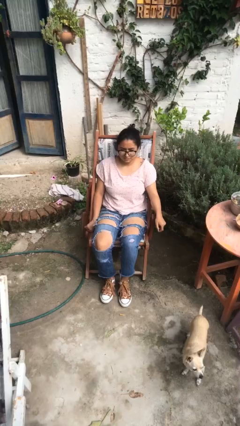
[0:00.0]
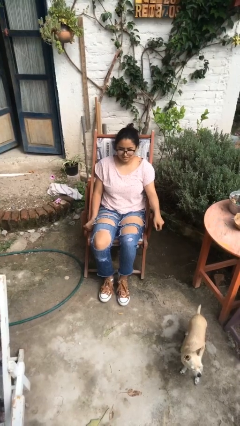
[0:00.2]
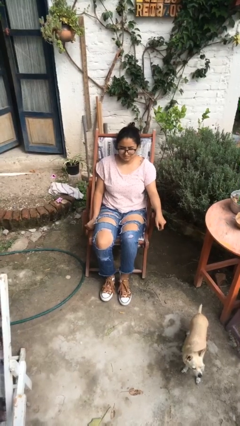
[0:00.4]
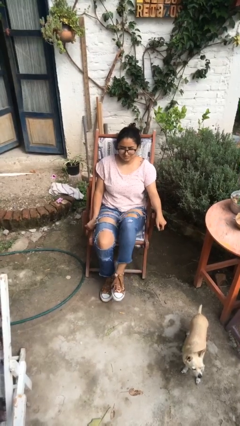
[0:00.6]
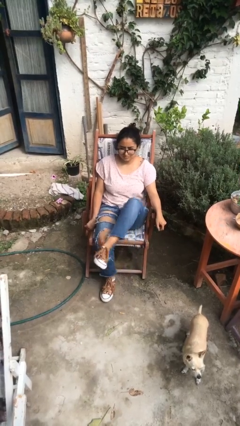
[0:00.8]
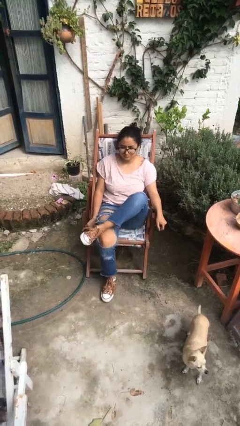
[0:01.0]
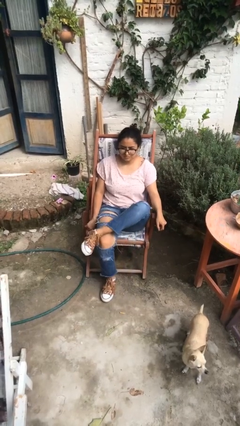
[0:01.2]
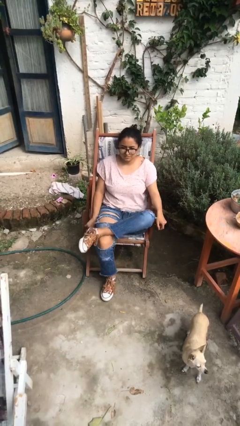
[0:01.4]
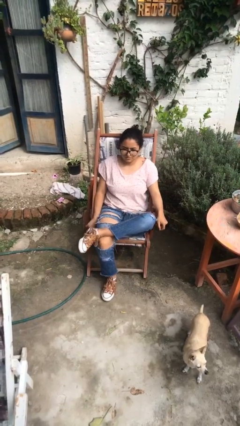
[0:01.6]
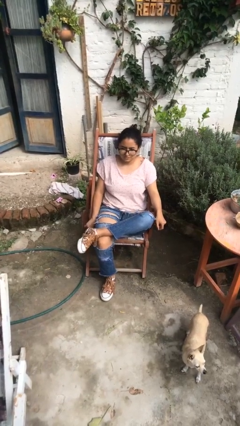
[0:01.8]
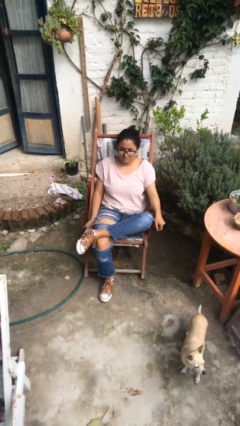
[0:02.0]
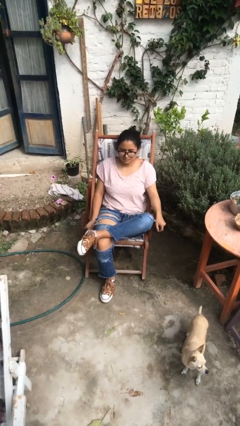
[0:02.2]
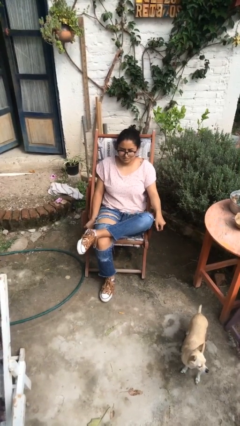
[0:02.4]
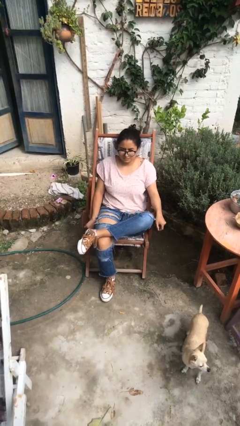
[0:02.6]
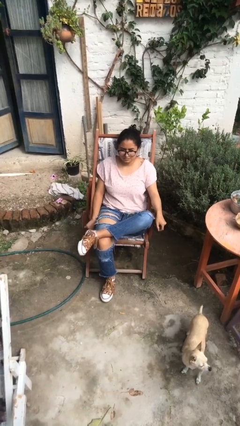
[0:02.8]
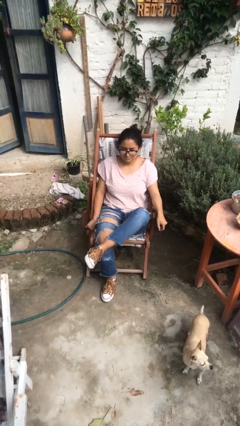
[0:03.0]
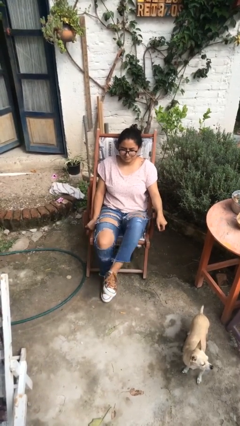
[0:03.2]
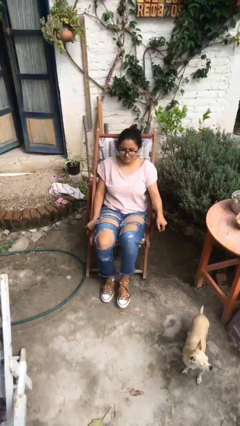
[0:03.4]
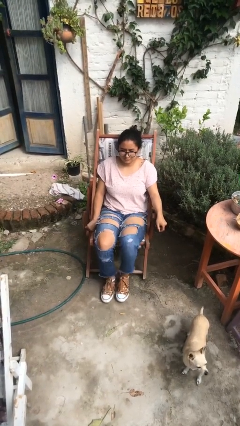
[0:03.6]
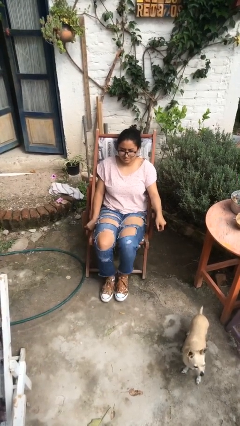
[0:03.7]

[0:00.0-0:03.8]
person crosses legs

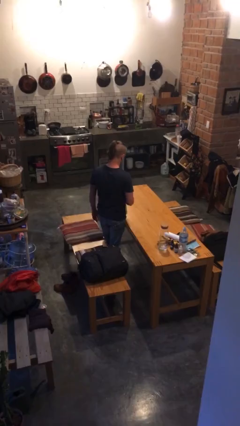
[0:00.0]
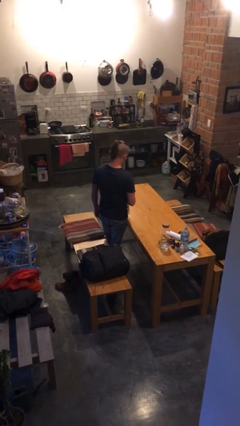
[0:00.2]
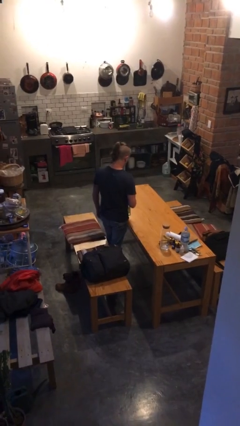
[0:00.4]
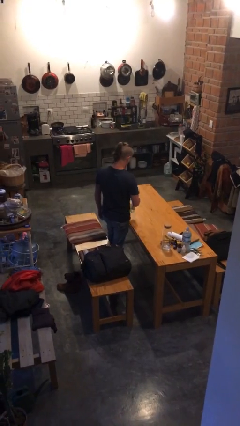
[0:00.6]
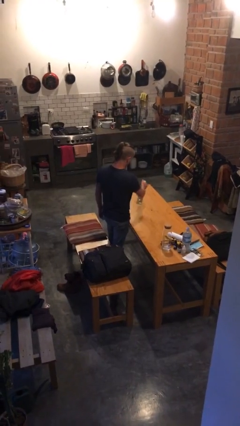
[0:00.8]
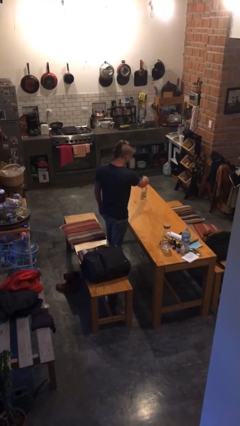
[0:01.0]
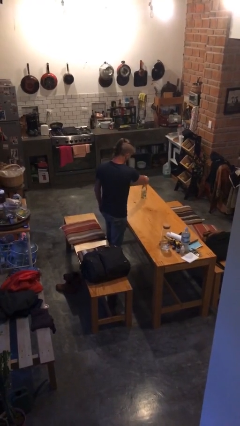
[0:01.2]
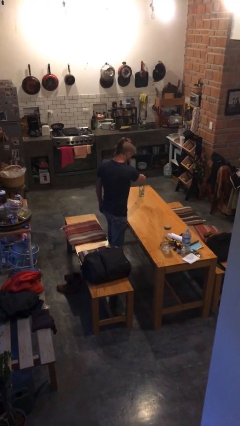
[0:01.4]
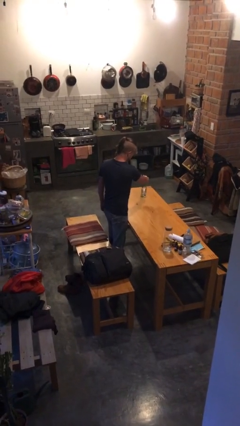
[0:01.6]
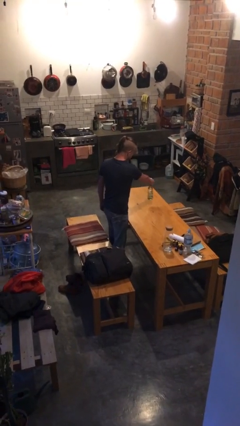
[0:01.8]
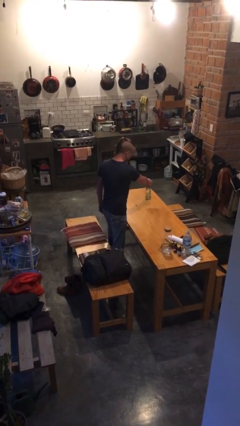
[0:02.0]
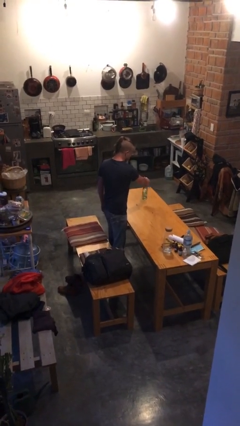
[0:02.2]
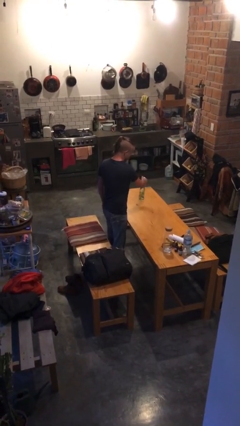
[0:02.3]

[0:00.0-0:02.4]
person sprays from bottle

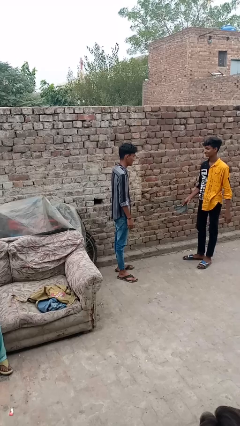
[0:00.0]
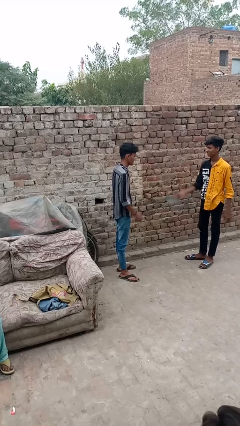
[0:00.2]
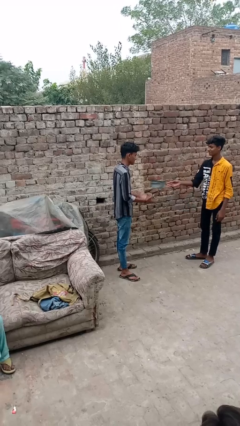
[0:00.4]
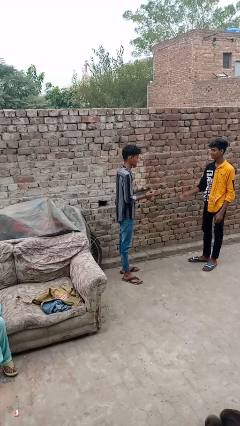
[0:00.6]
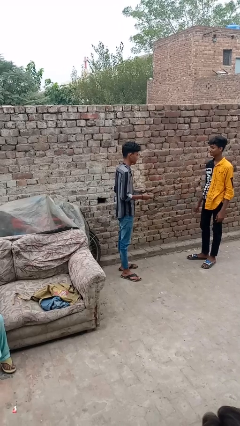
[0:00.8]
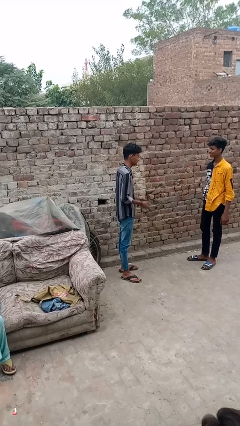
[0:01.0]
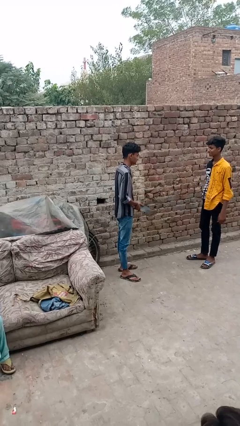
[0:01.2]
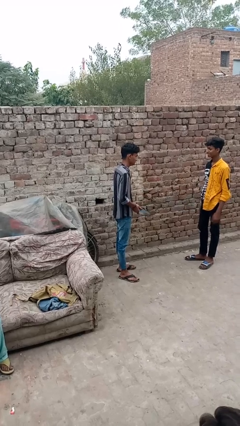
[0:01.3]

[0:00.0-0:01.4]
person catches object from person

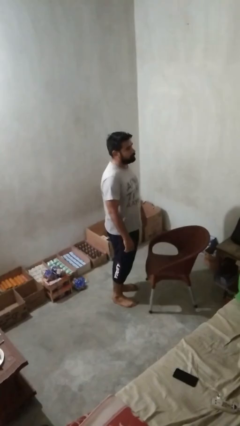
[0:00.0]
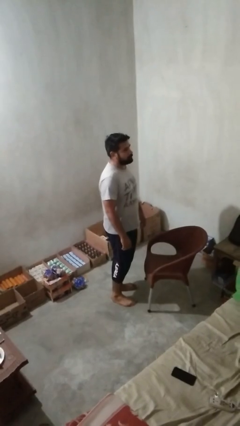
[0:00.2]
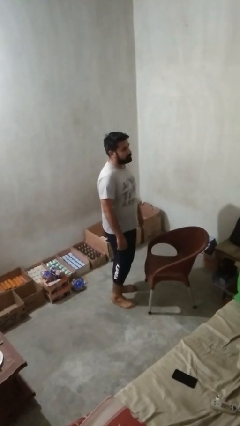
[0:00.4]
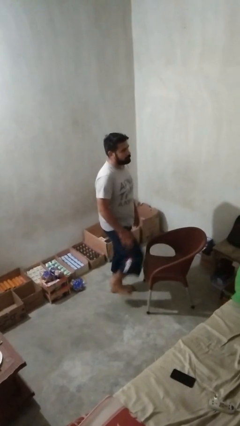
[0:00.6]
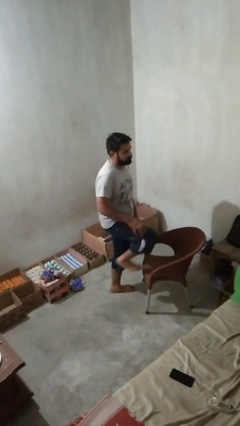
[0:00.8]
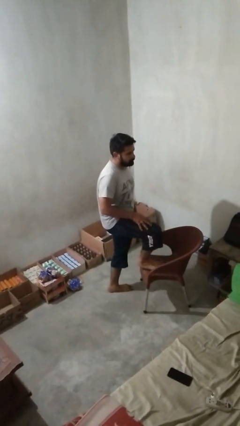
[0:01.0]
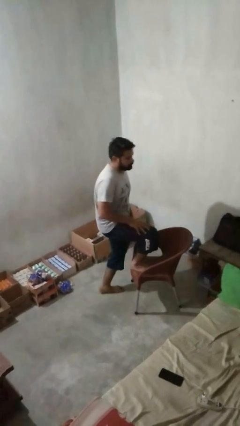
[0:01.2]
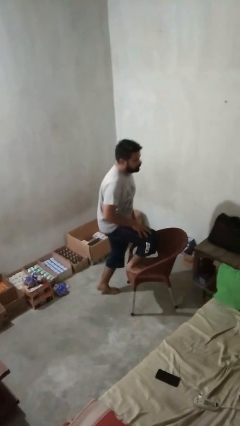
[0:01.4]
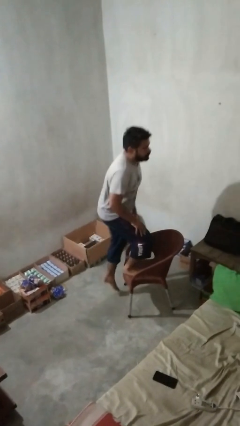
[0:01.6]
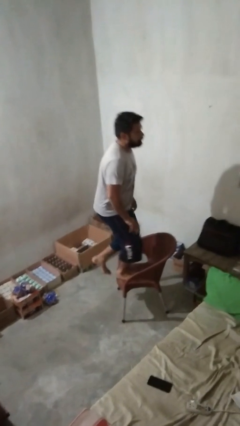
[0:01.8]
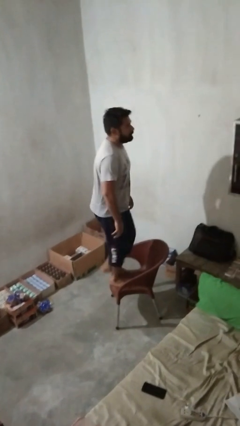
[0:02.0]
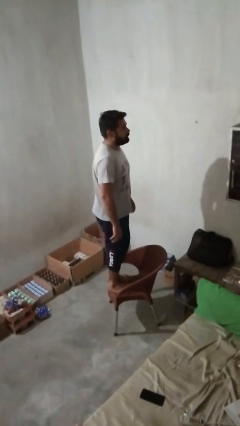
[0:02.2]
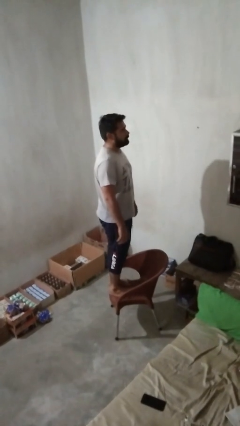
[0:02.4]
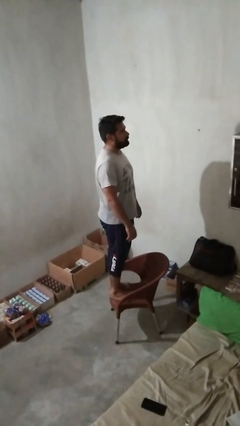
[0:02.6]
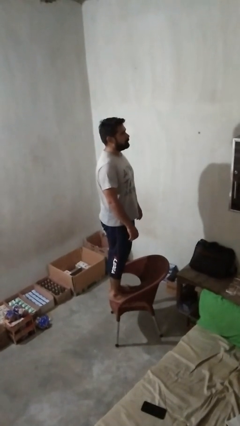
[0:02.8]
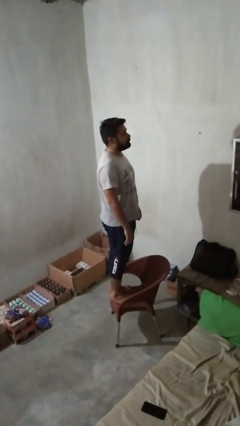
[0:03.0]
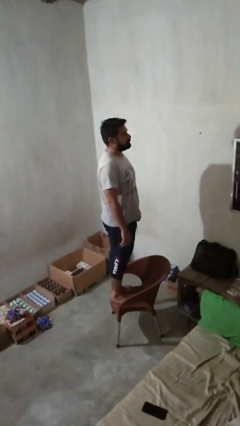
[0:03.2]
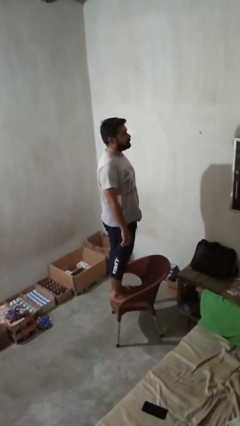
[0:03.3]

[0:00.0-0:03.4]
person climbs on chair

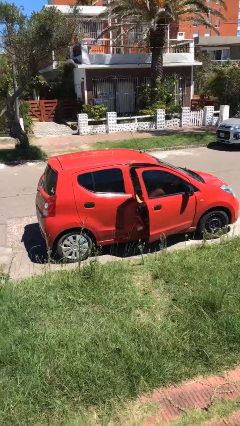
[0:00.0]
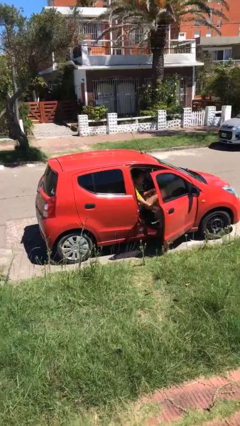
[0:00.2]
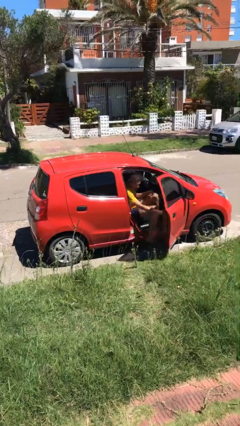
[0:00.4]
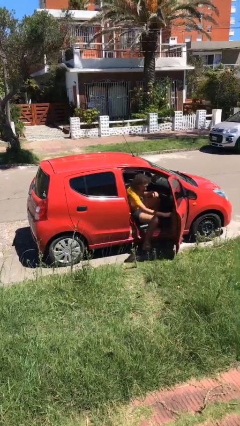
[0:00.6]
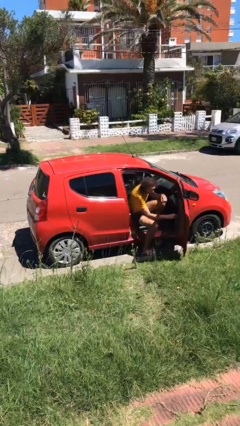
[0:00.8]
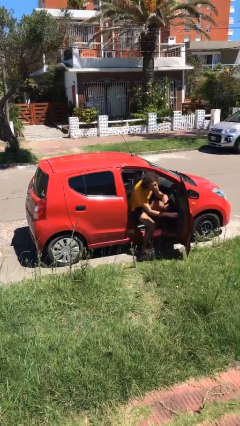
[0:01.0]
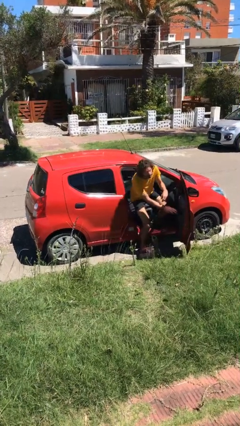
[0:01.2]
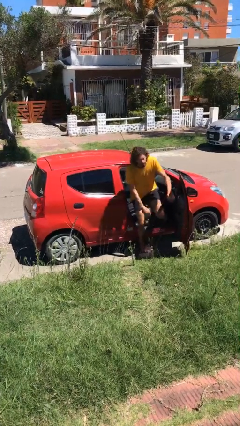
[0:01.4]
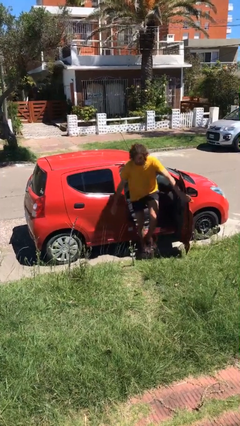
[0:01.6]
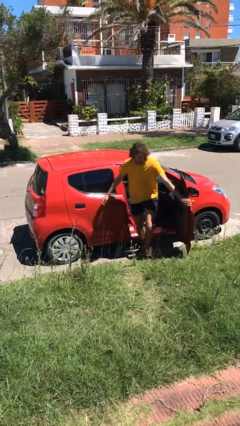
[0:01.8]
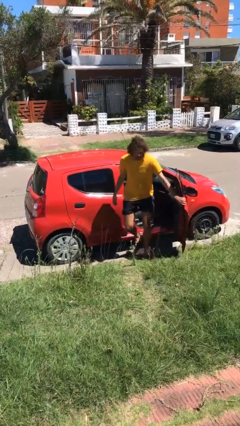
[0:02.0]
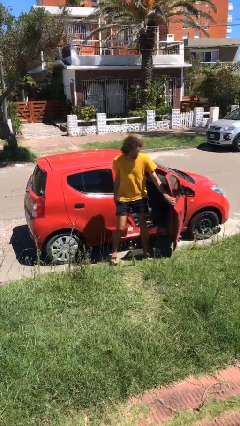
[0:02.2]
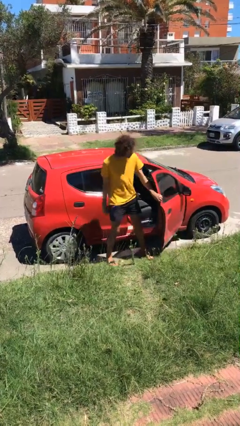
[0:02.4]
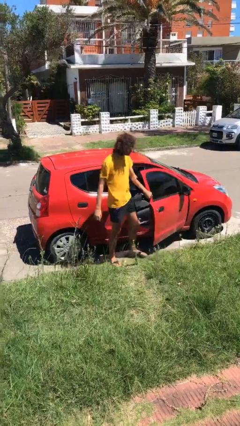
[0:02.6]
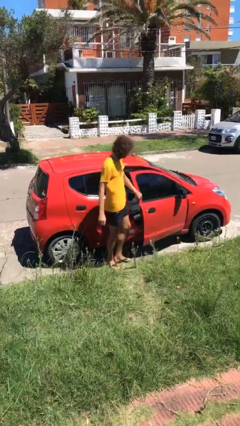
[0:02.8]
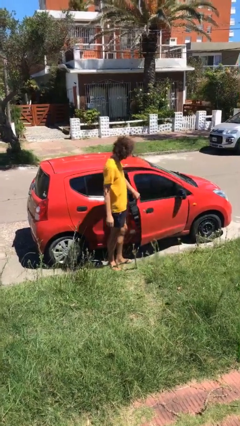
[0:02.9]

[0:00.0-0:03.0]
car drops off person

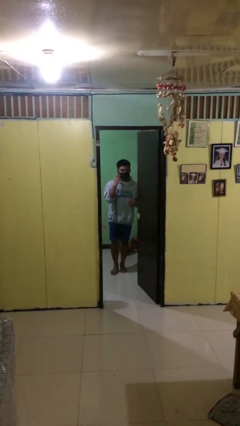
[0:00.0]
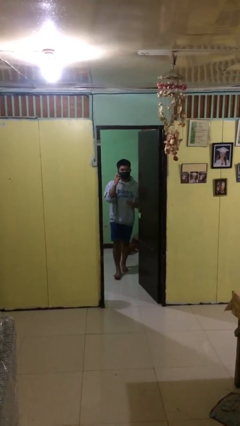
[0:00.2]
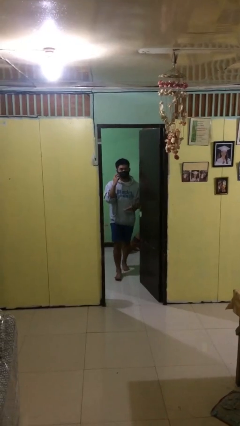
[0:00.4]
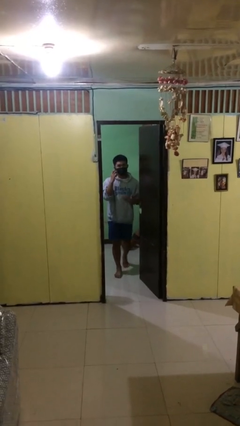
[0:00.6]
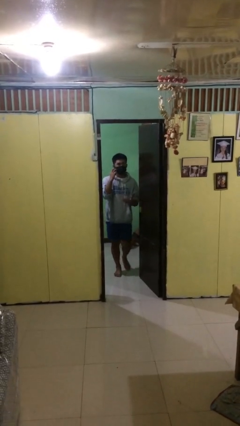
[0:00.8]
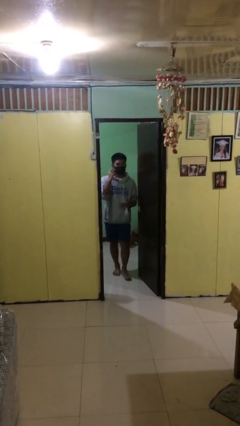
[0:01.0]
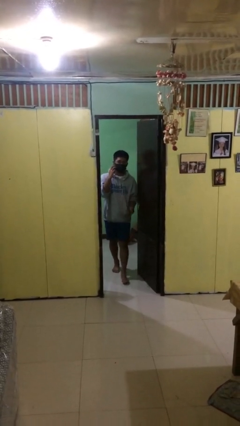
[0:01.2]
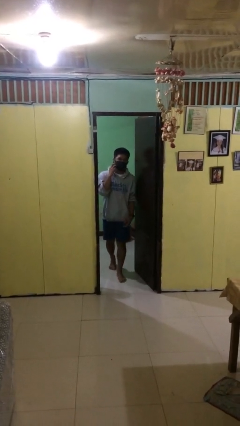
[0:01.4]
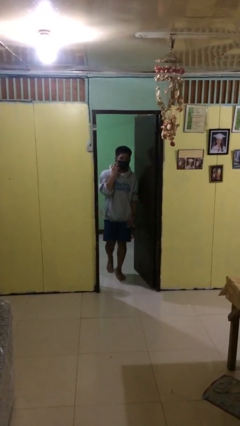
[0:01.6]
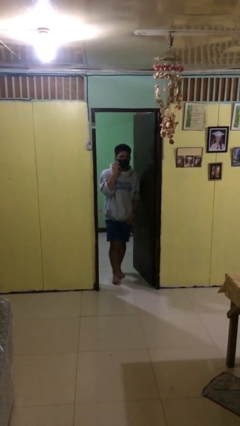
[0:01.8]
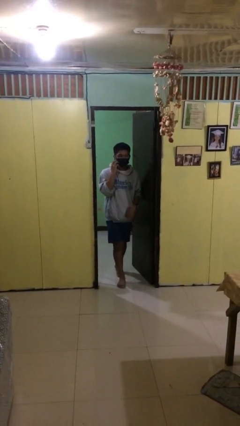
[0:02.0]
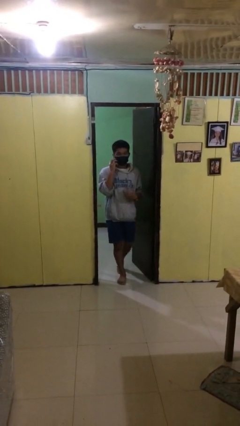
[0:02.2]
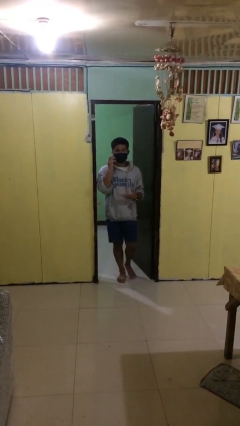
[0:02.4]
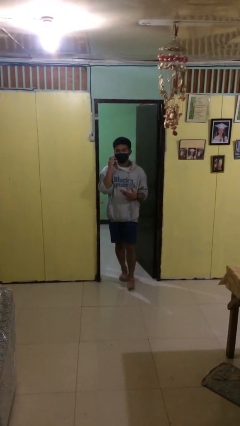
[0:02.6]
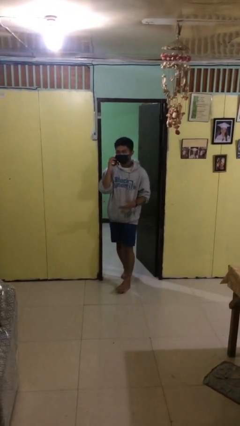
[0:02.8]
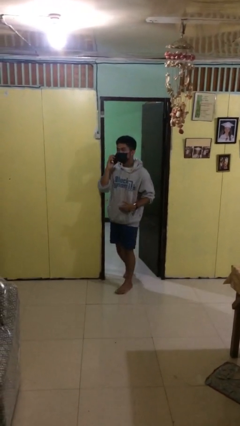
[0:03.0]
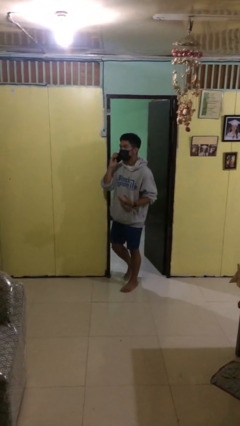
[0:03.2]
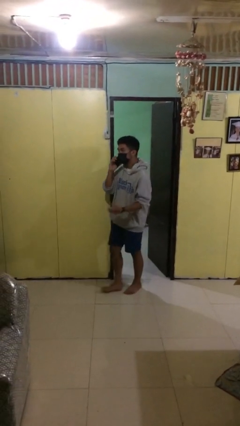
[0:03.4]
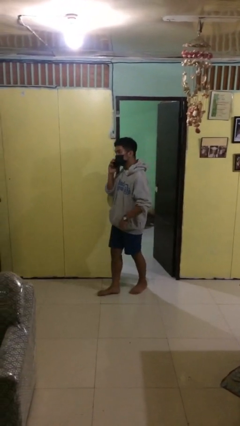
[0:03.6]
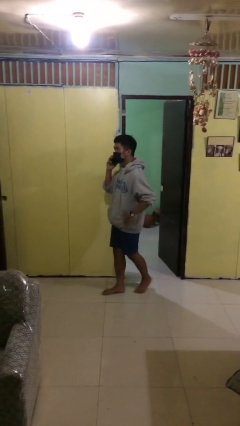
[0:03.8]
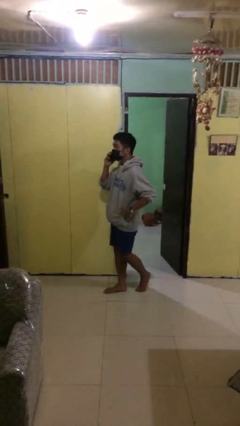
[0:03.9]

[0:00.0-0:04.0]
person enters scene through structure
